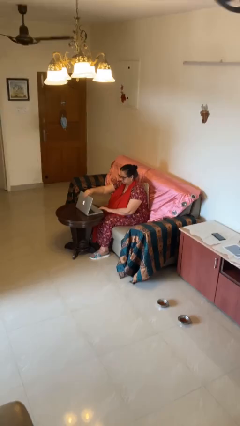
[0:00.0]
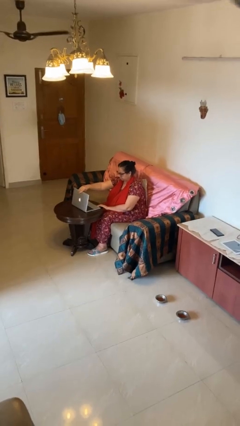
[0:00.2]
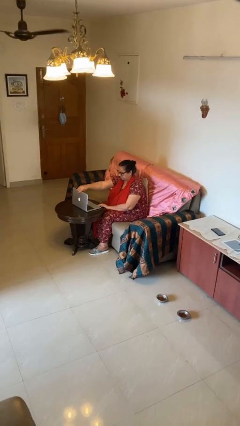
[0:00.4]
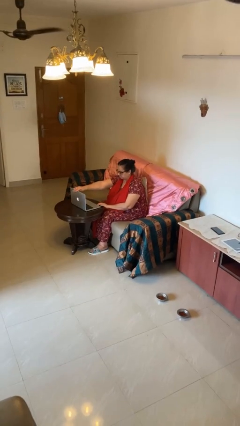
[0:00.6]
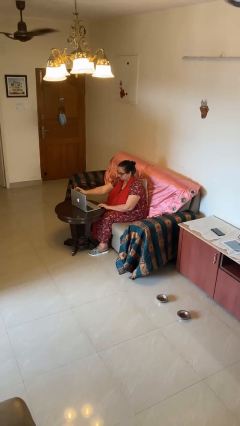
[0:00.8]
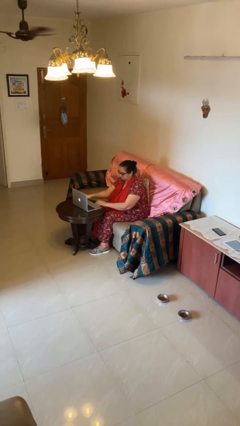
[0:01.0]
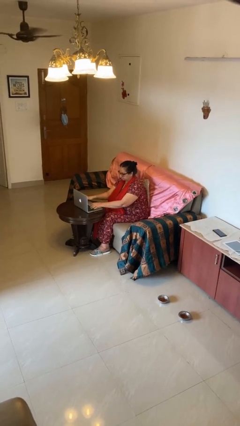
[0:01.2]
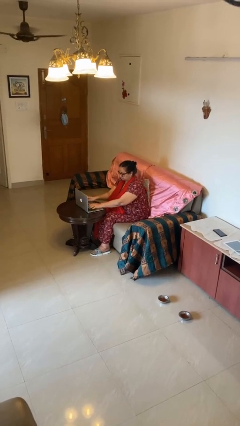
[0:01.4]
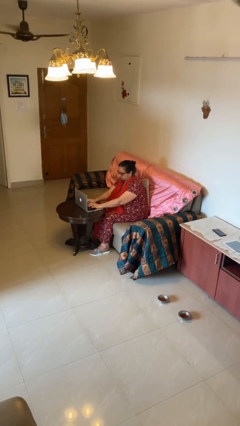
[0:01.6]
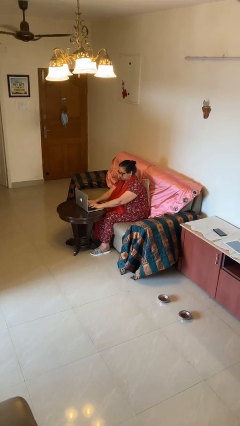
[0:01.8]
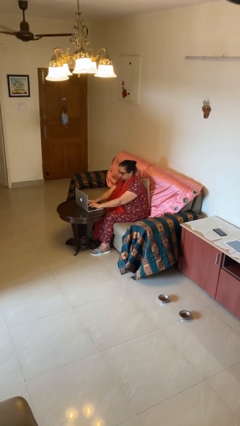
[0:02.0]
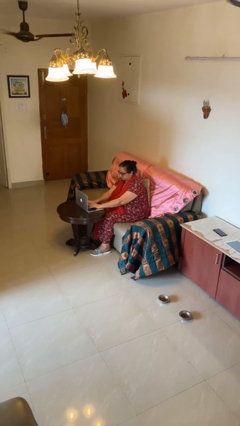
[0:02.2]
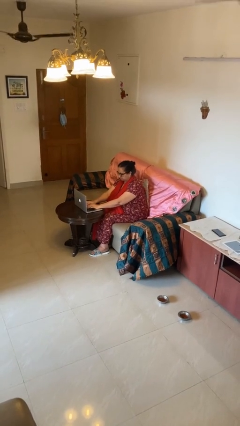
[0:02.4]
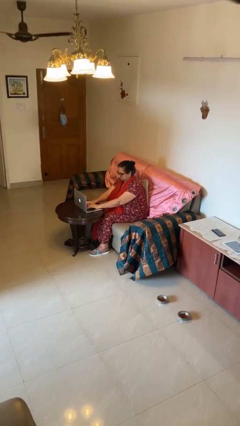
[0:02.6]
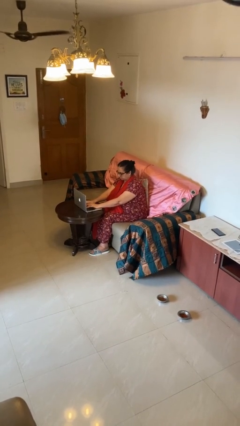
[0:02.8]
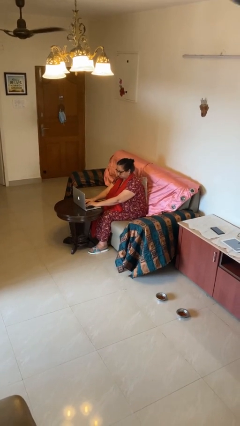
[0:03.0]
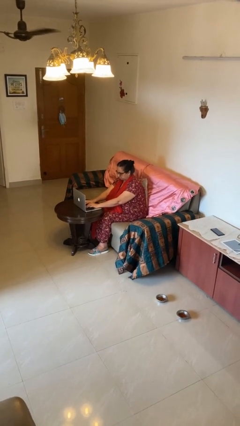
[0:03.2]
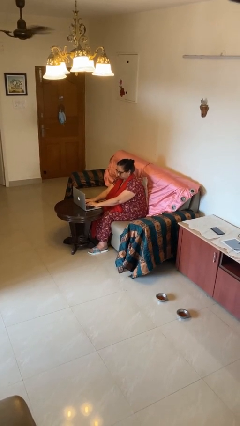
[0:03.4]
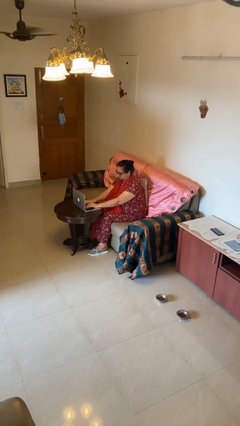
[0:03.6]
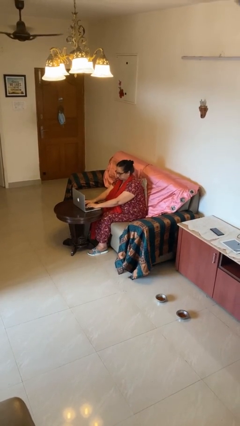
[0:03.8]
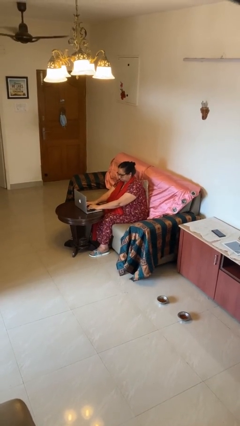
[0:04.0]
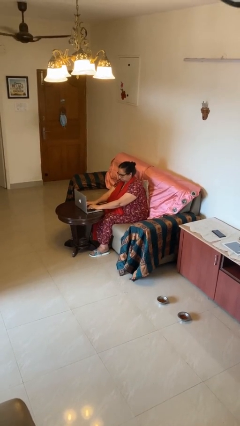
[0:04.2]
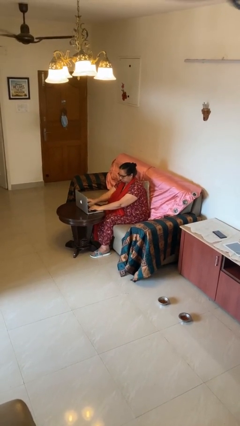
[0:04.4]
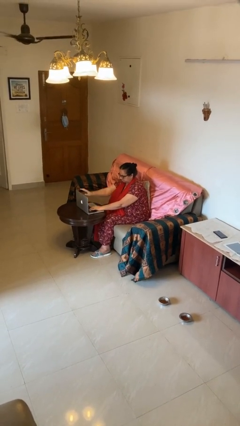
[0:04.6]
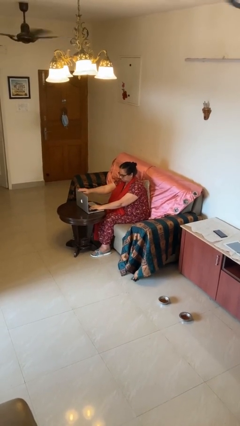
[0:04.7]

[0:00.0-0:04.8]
person interacts with laptop

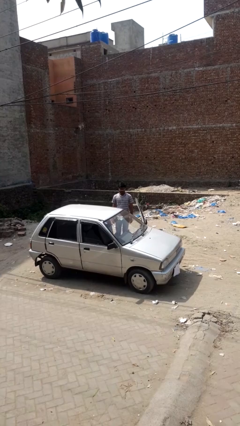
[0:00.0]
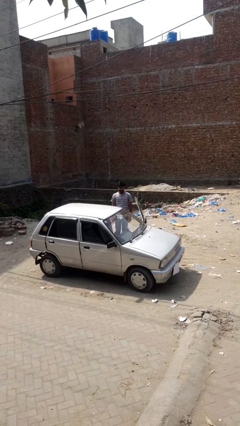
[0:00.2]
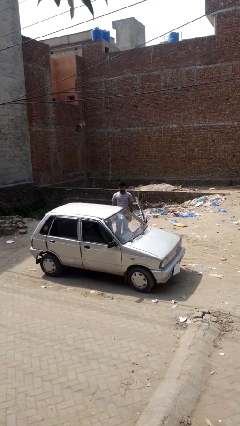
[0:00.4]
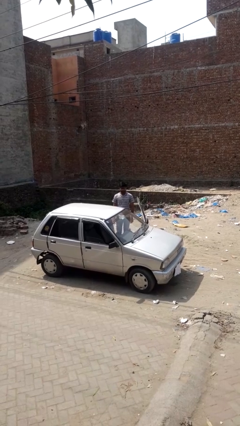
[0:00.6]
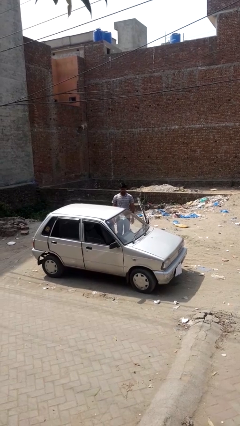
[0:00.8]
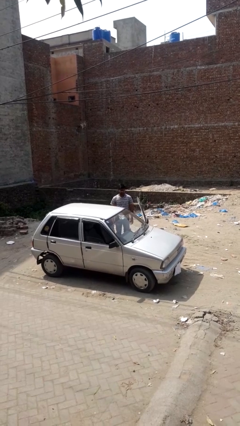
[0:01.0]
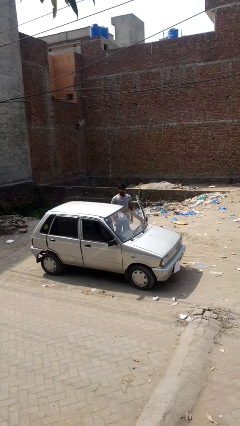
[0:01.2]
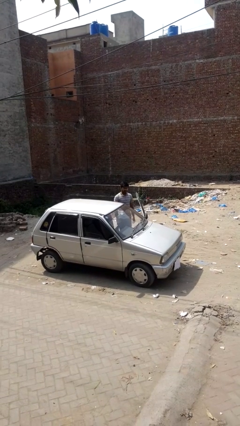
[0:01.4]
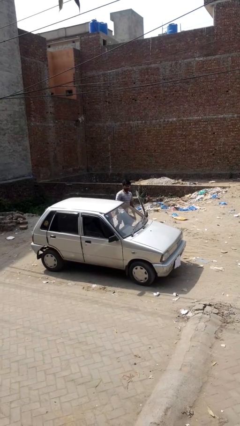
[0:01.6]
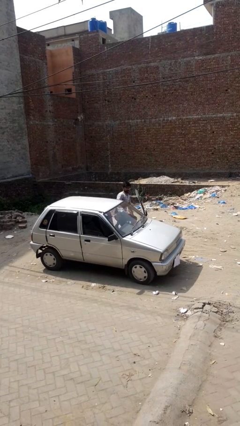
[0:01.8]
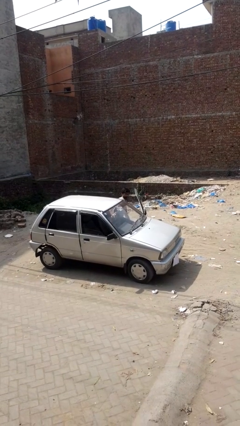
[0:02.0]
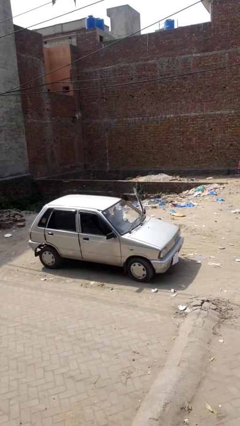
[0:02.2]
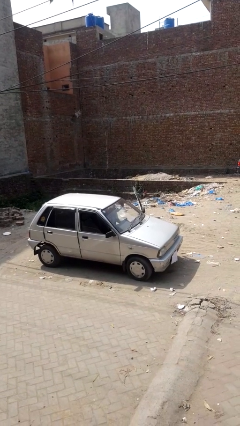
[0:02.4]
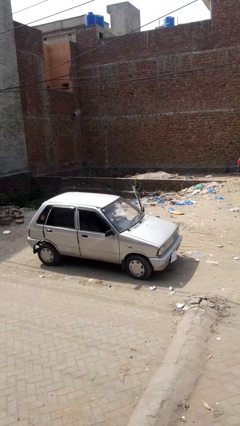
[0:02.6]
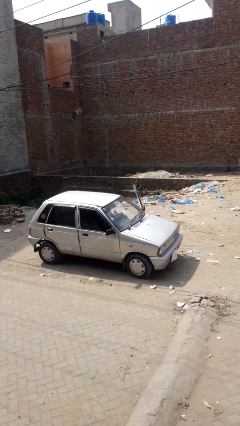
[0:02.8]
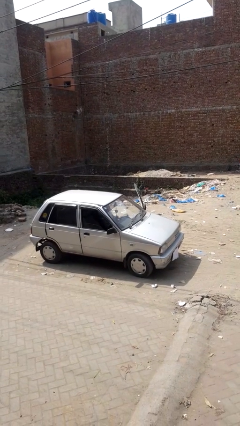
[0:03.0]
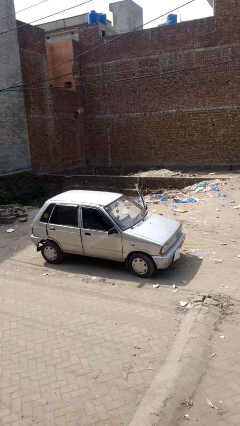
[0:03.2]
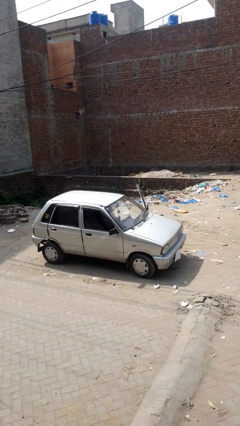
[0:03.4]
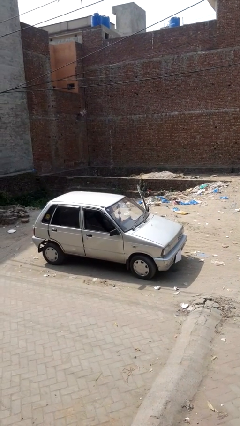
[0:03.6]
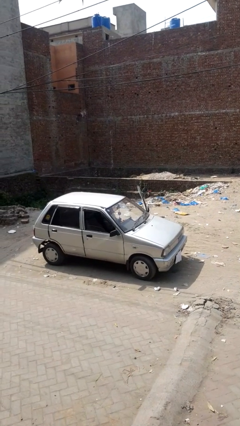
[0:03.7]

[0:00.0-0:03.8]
person enters car

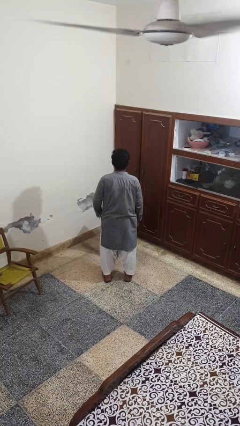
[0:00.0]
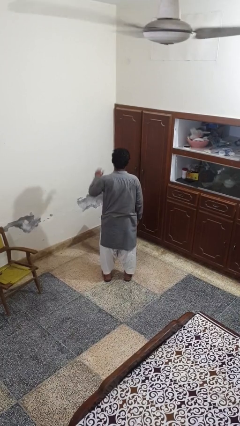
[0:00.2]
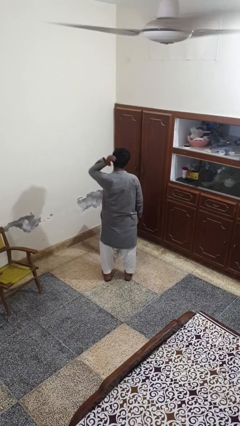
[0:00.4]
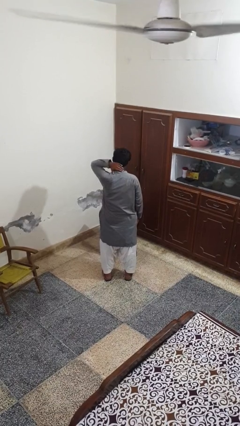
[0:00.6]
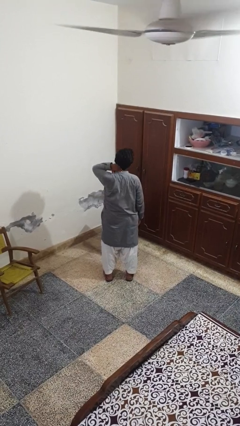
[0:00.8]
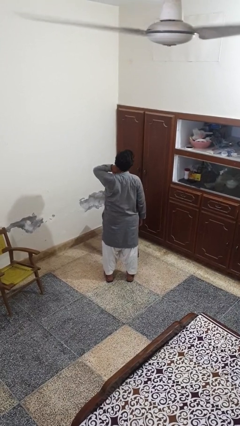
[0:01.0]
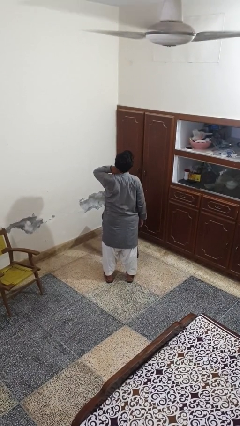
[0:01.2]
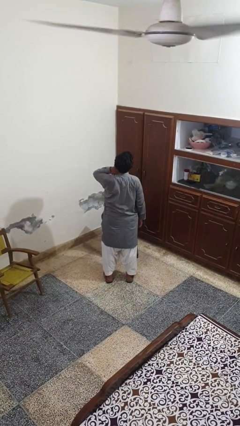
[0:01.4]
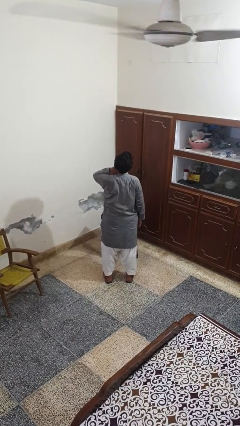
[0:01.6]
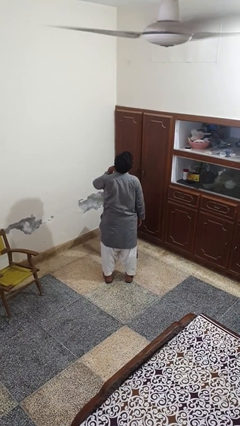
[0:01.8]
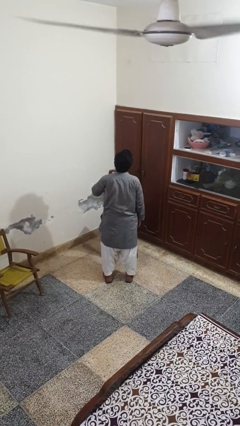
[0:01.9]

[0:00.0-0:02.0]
person rubs neck

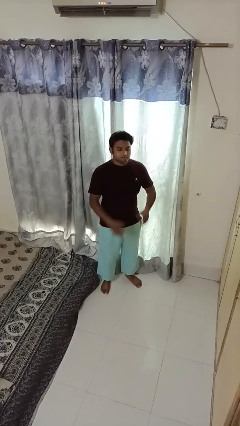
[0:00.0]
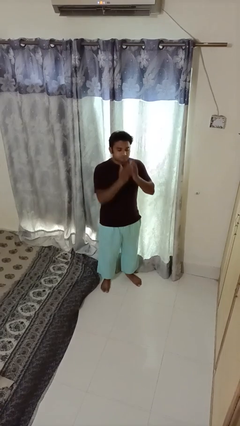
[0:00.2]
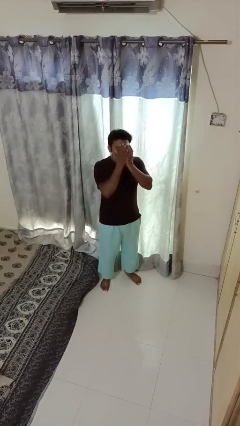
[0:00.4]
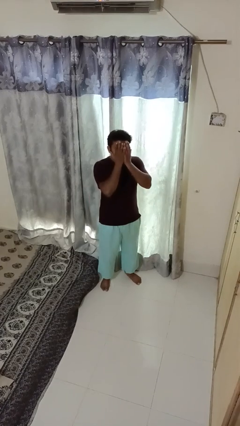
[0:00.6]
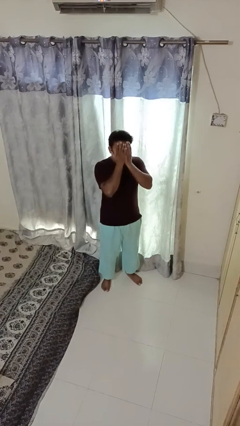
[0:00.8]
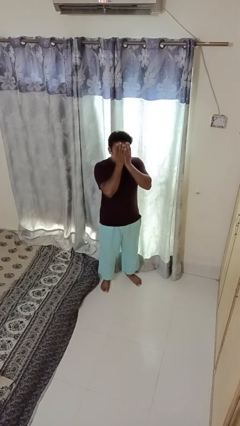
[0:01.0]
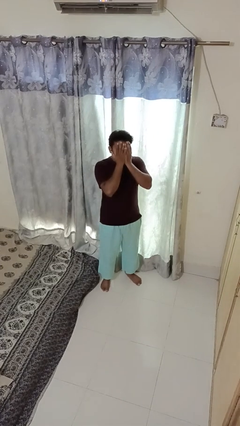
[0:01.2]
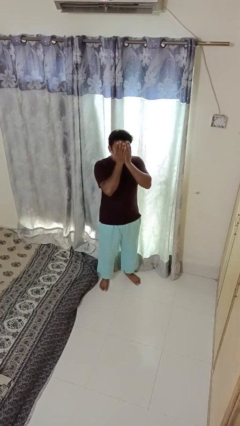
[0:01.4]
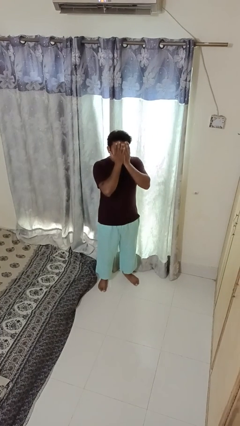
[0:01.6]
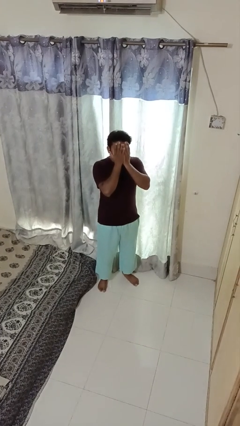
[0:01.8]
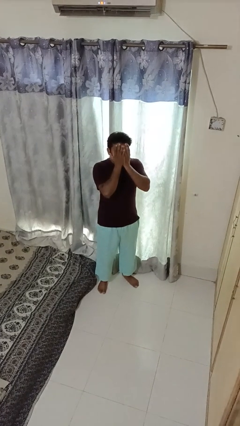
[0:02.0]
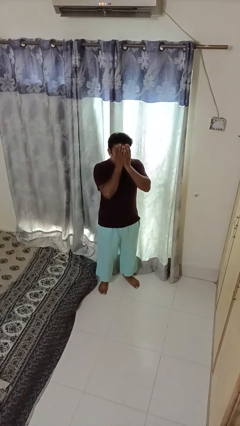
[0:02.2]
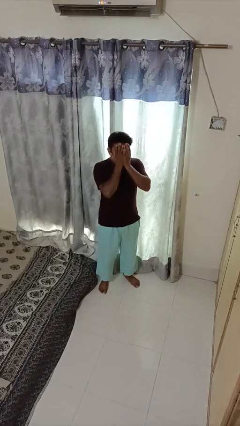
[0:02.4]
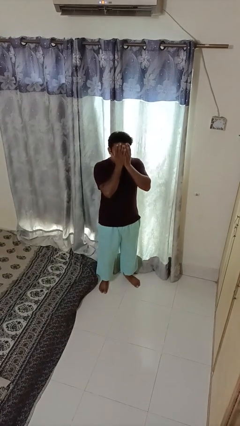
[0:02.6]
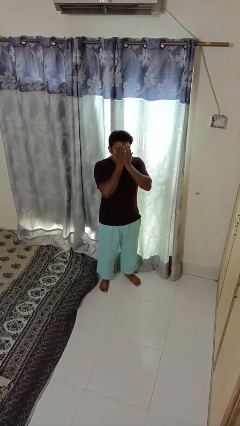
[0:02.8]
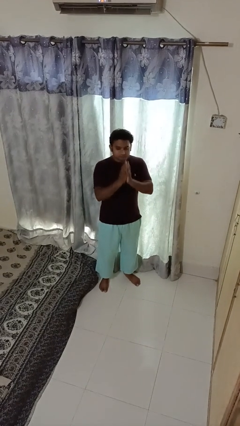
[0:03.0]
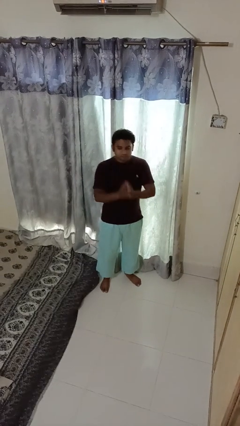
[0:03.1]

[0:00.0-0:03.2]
person covers face with hands

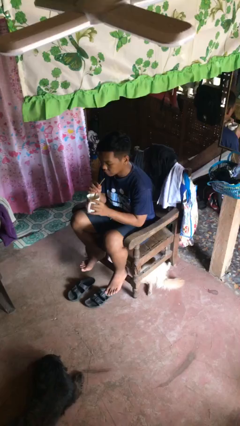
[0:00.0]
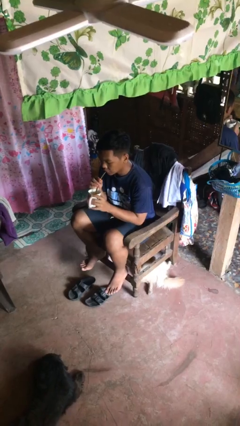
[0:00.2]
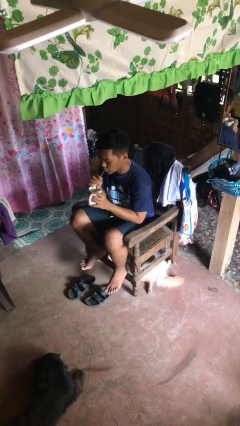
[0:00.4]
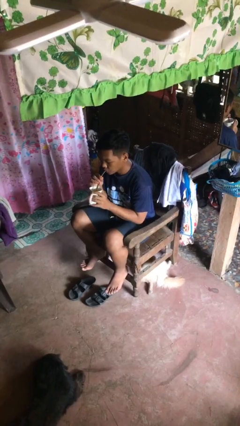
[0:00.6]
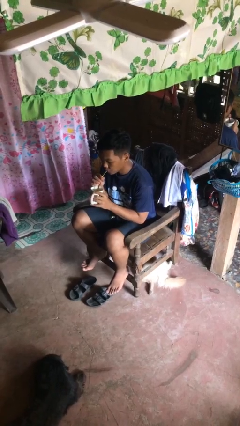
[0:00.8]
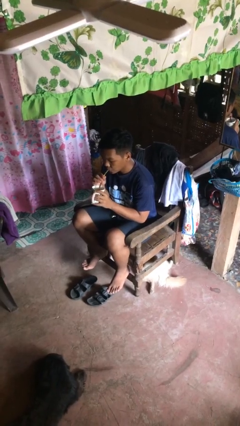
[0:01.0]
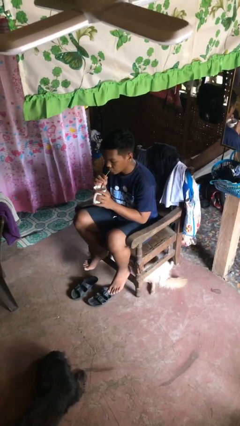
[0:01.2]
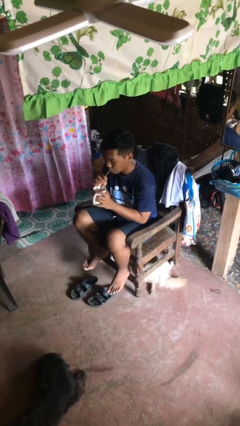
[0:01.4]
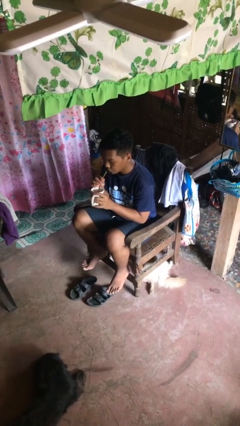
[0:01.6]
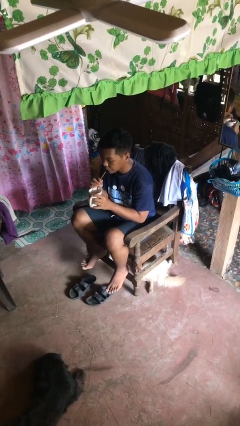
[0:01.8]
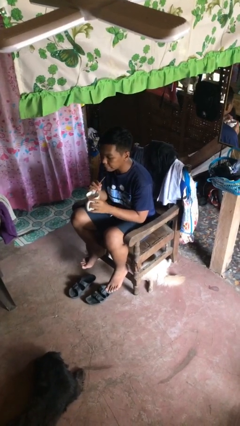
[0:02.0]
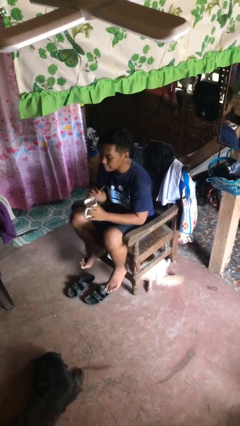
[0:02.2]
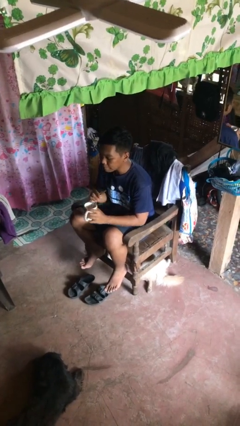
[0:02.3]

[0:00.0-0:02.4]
person drinks from straw

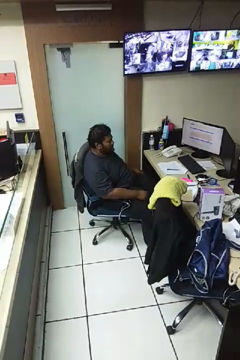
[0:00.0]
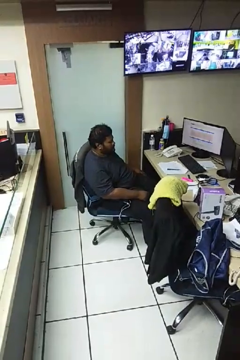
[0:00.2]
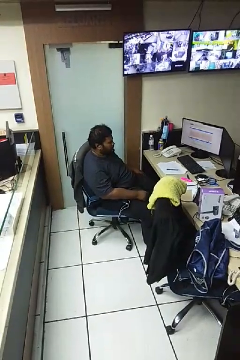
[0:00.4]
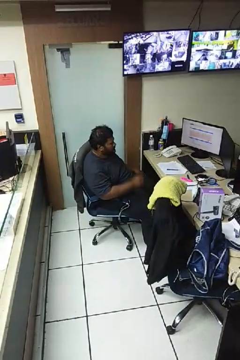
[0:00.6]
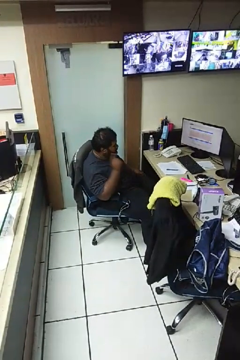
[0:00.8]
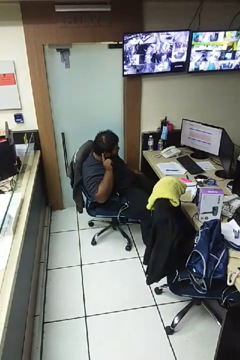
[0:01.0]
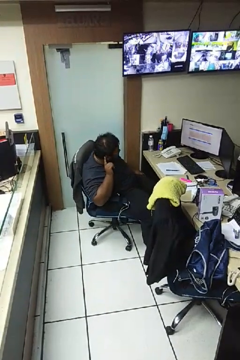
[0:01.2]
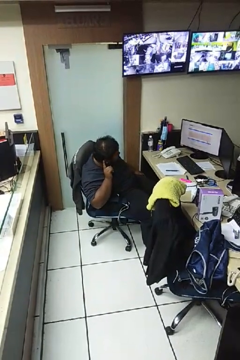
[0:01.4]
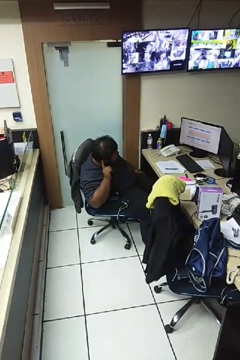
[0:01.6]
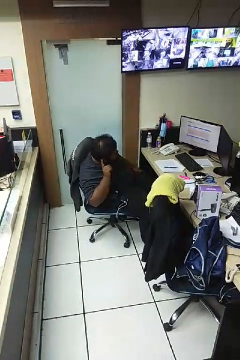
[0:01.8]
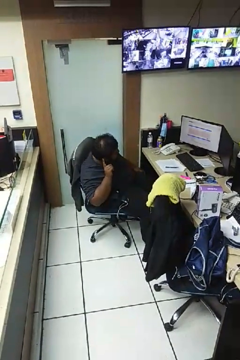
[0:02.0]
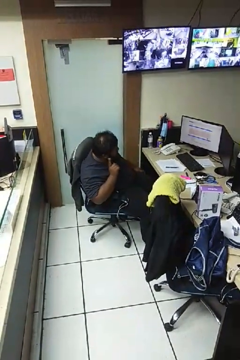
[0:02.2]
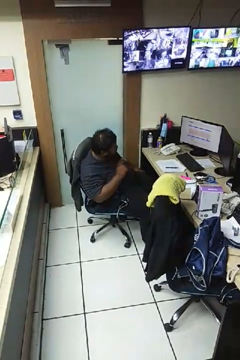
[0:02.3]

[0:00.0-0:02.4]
person gestures listen closely
